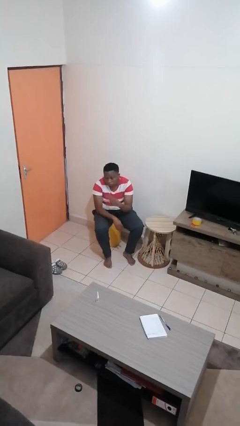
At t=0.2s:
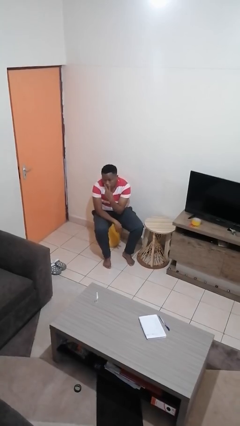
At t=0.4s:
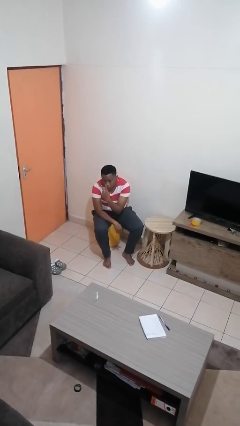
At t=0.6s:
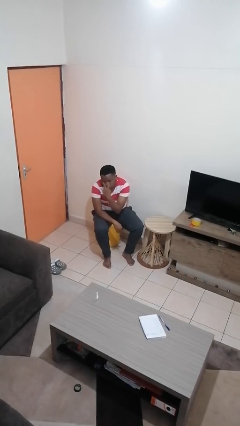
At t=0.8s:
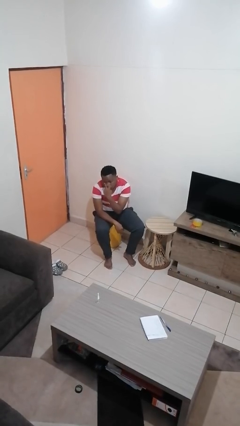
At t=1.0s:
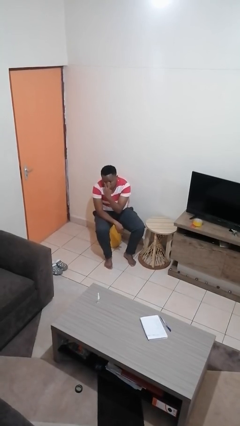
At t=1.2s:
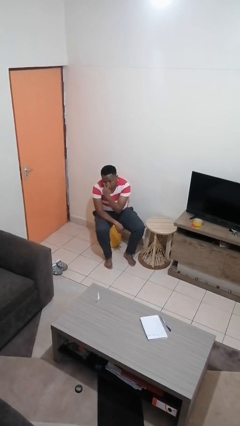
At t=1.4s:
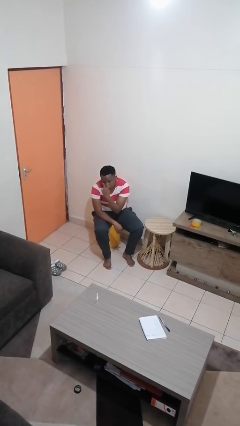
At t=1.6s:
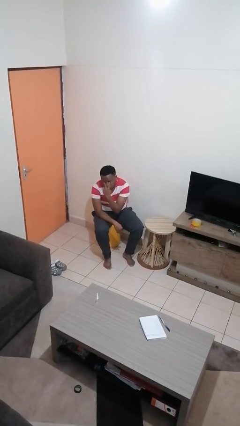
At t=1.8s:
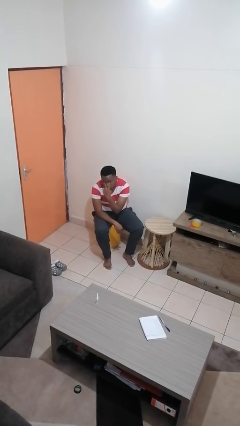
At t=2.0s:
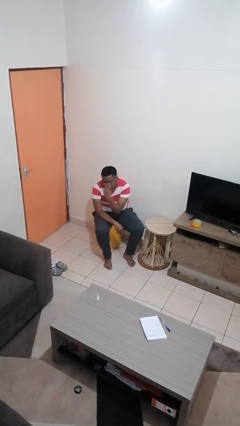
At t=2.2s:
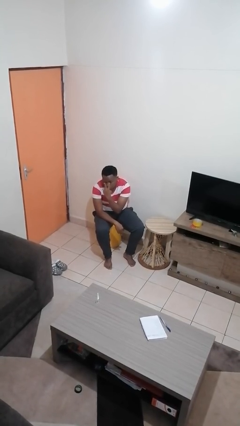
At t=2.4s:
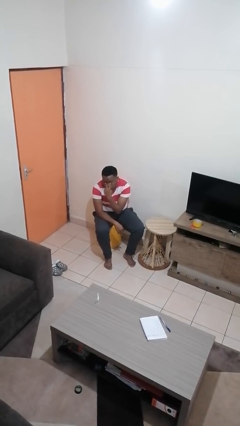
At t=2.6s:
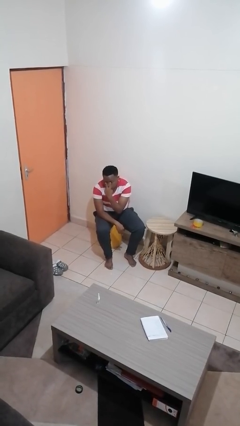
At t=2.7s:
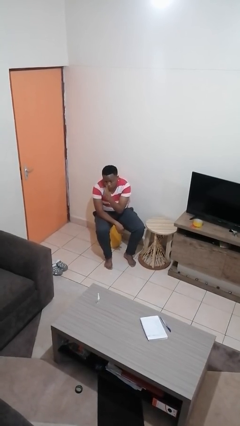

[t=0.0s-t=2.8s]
person gestures watch closely

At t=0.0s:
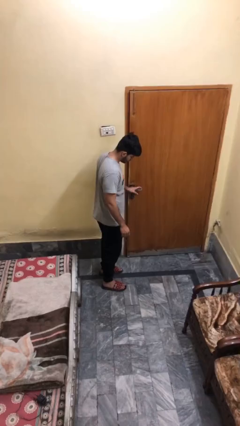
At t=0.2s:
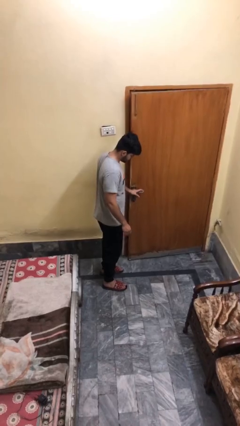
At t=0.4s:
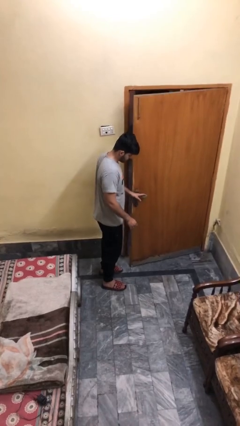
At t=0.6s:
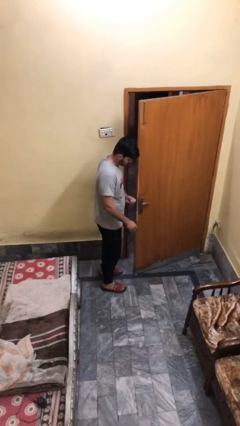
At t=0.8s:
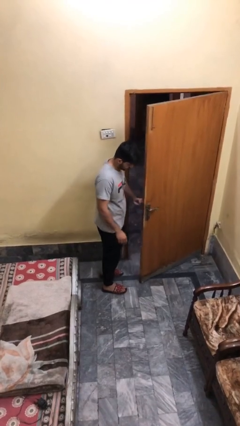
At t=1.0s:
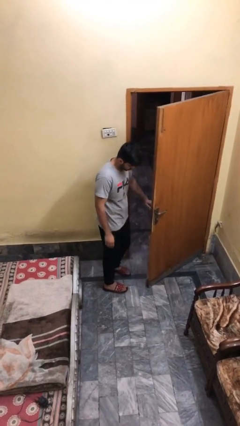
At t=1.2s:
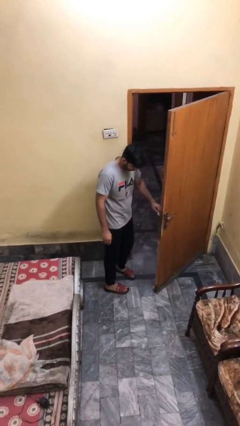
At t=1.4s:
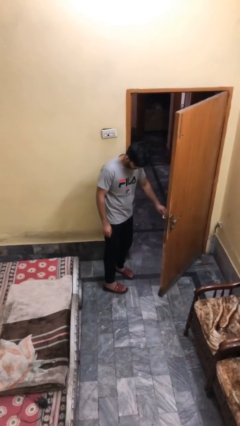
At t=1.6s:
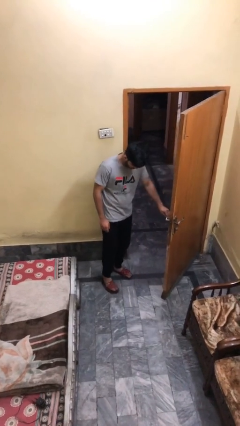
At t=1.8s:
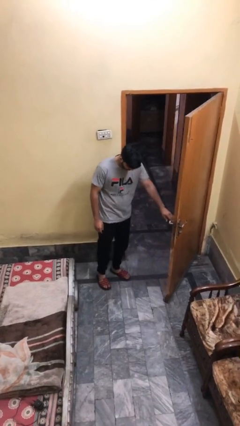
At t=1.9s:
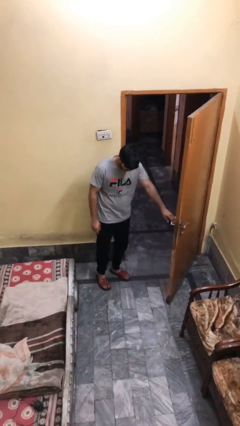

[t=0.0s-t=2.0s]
person opens facility door

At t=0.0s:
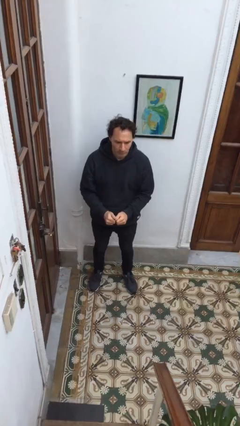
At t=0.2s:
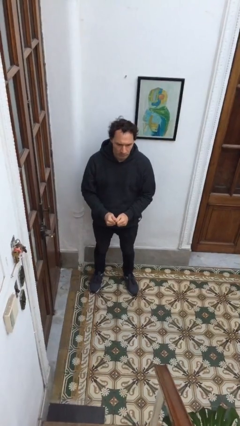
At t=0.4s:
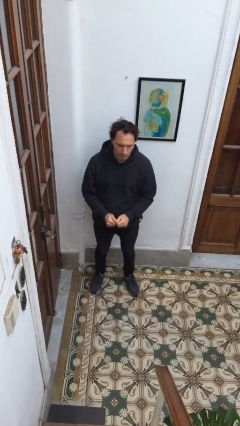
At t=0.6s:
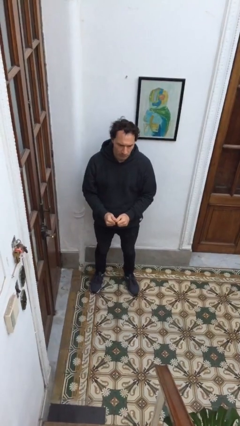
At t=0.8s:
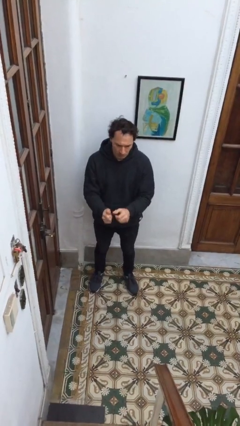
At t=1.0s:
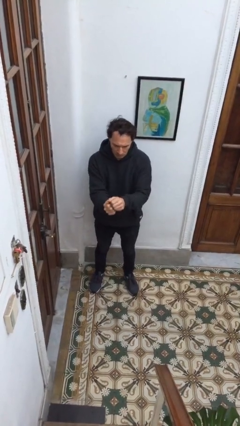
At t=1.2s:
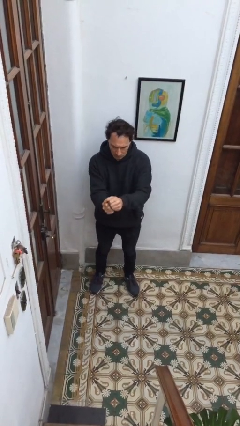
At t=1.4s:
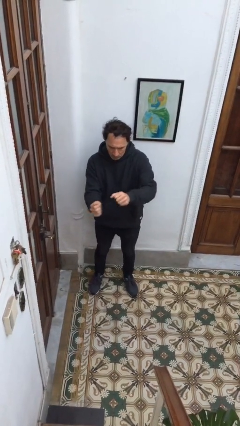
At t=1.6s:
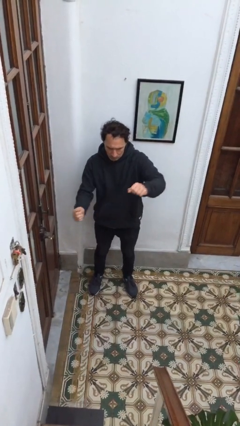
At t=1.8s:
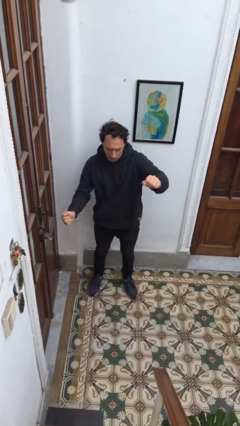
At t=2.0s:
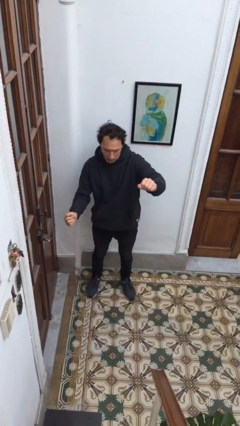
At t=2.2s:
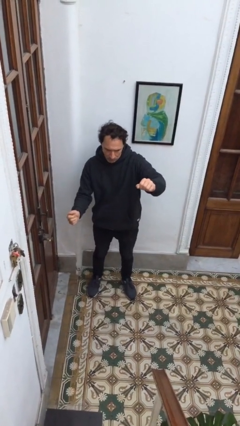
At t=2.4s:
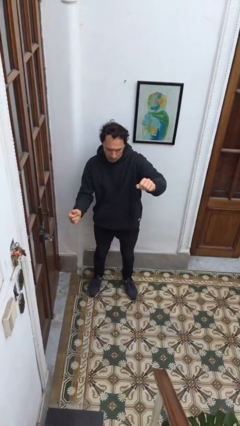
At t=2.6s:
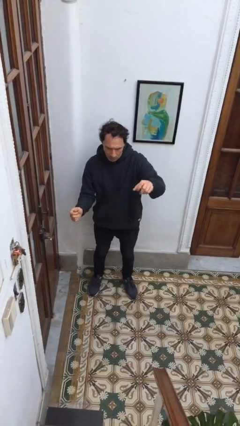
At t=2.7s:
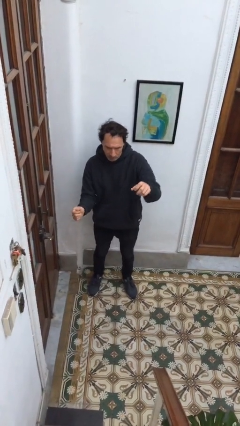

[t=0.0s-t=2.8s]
person gestures zoom in

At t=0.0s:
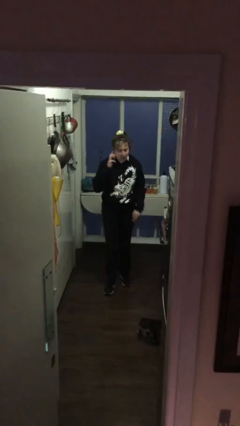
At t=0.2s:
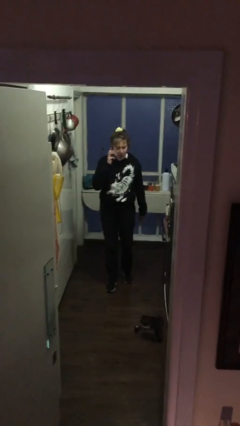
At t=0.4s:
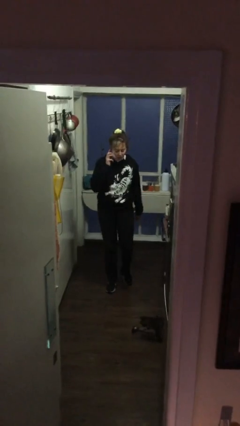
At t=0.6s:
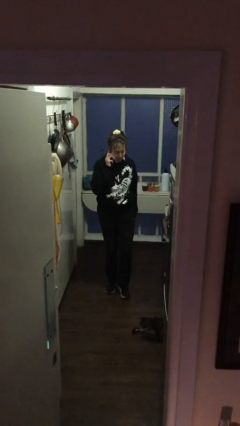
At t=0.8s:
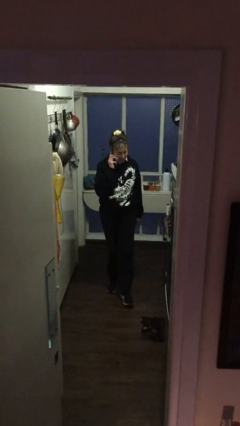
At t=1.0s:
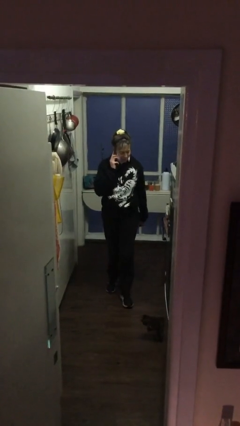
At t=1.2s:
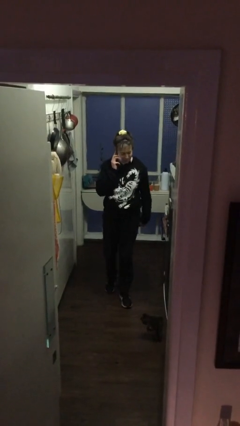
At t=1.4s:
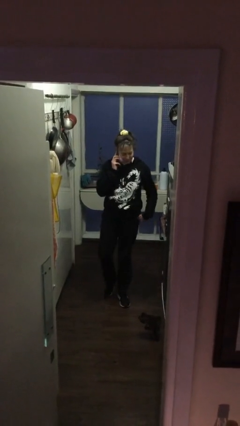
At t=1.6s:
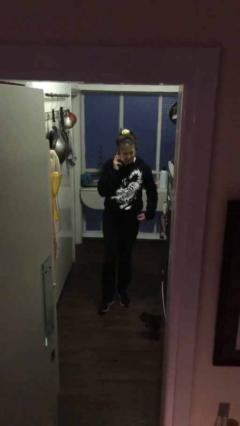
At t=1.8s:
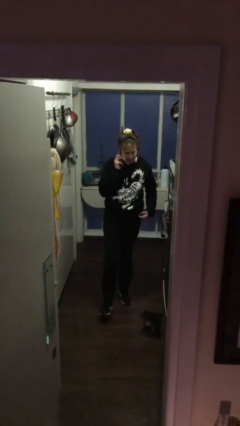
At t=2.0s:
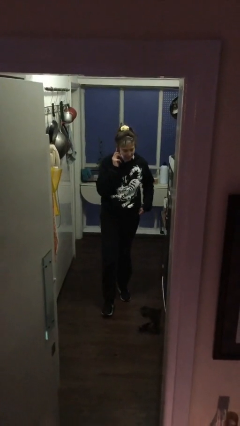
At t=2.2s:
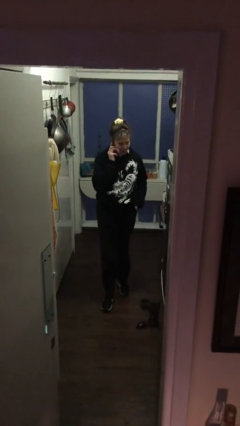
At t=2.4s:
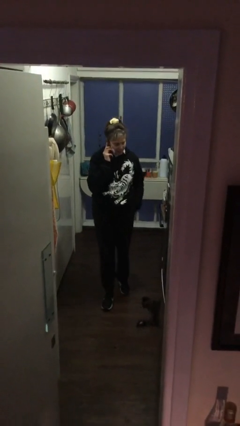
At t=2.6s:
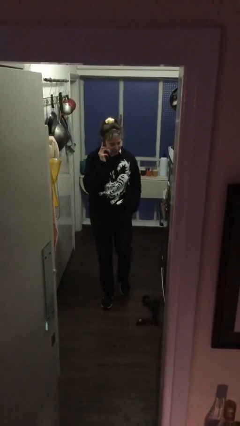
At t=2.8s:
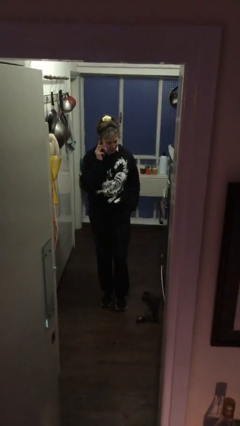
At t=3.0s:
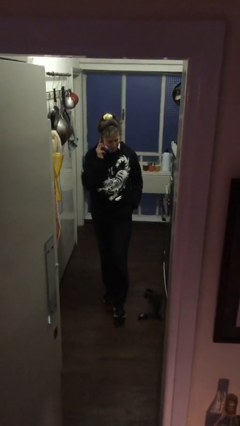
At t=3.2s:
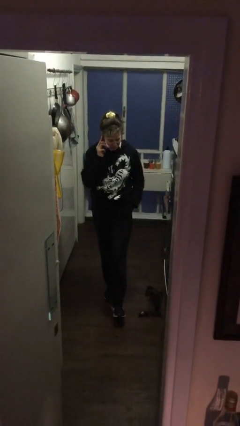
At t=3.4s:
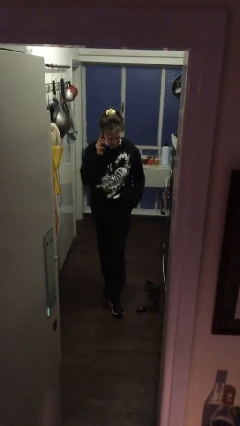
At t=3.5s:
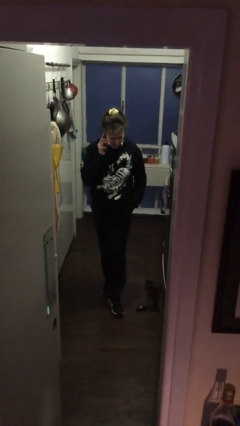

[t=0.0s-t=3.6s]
person talks on phone

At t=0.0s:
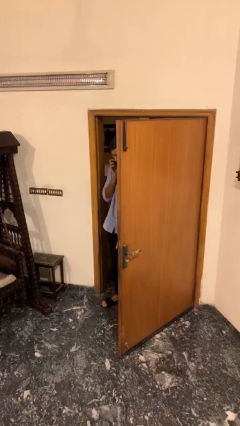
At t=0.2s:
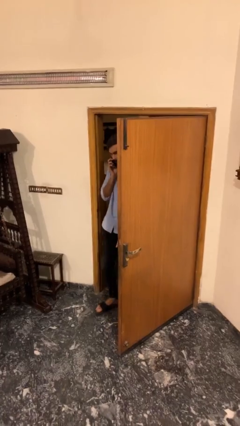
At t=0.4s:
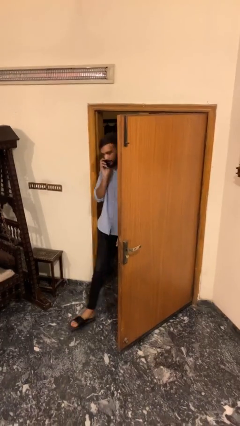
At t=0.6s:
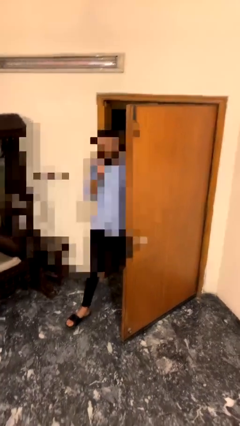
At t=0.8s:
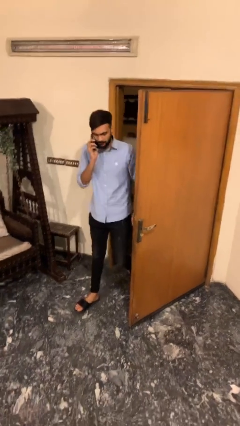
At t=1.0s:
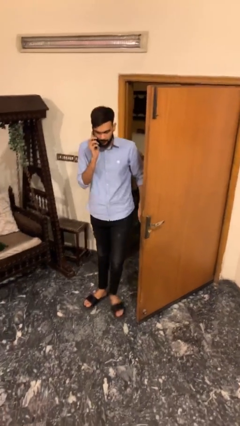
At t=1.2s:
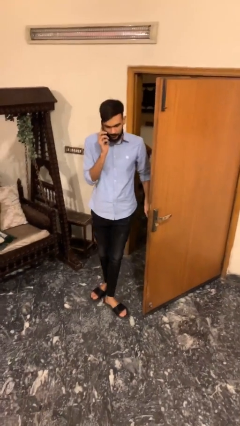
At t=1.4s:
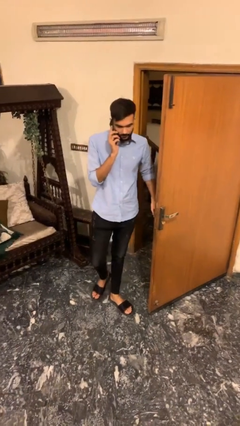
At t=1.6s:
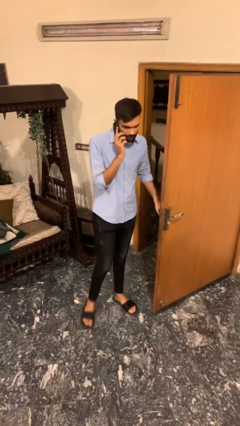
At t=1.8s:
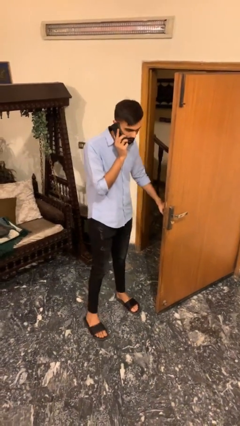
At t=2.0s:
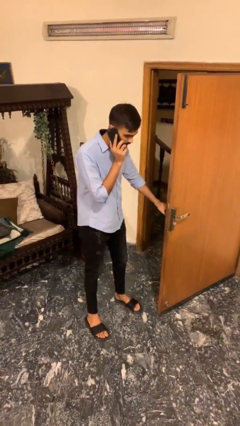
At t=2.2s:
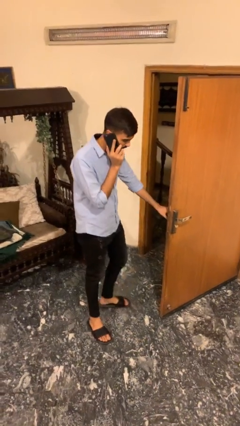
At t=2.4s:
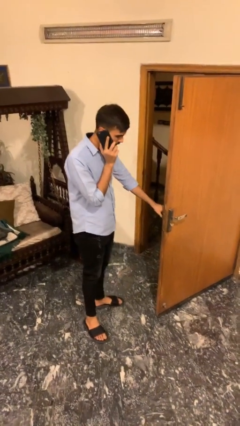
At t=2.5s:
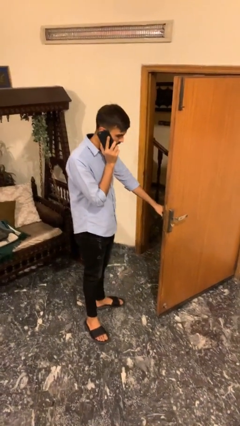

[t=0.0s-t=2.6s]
person enters scene through structure

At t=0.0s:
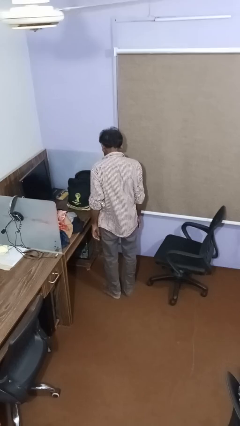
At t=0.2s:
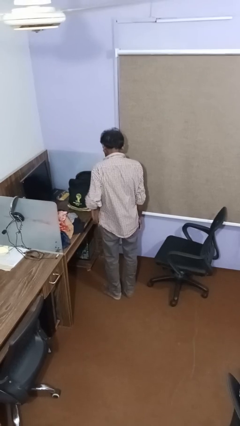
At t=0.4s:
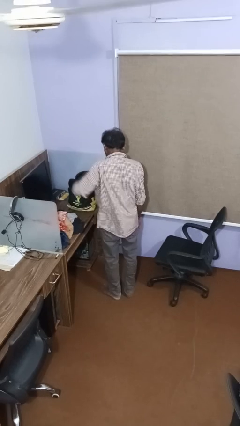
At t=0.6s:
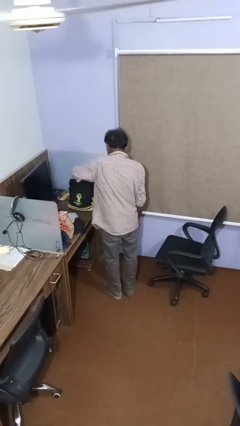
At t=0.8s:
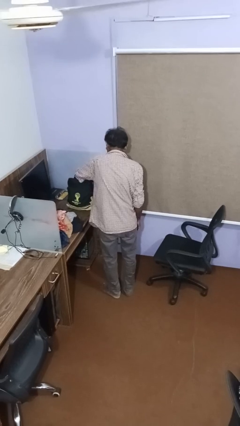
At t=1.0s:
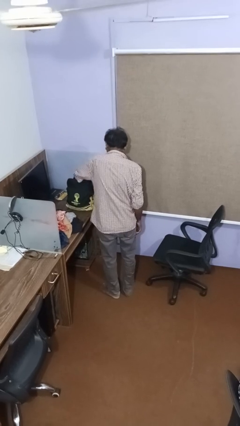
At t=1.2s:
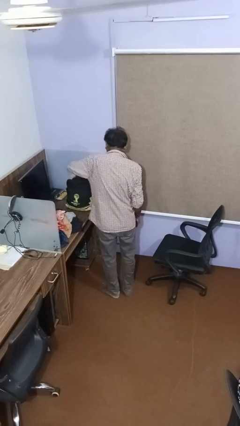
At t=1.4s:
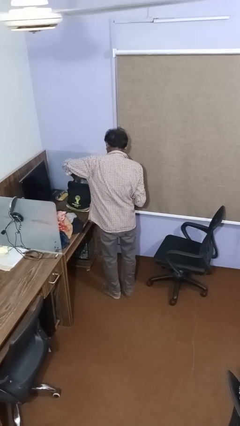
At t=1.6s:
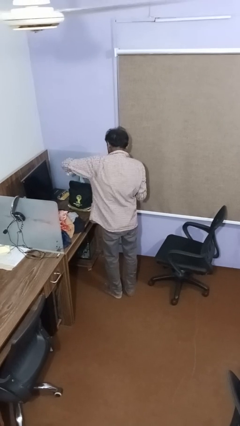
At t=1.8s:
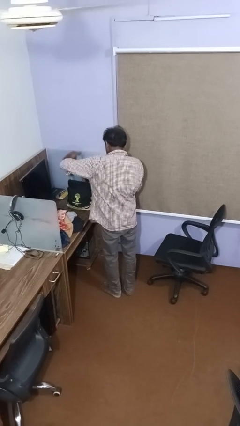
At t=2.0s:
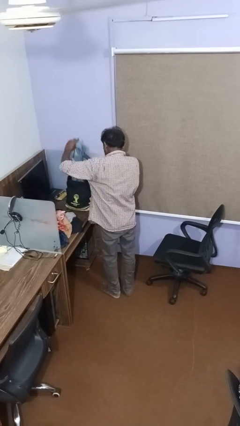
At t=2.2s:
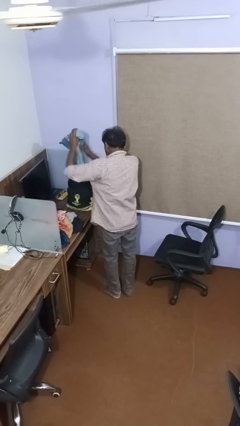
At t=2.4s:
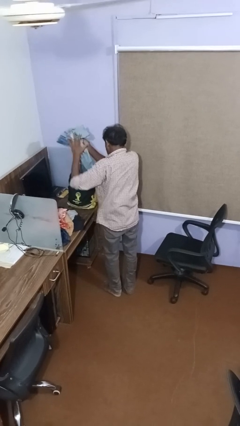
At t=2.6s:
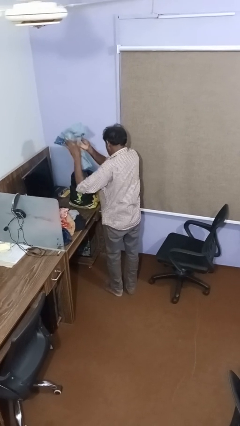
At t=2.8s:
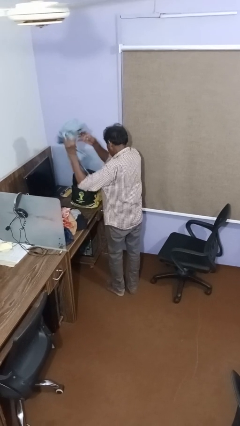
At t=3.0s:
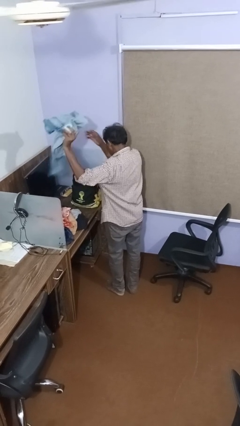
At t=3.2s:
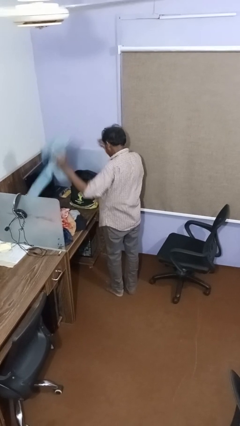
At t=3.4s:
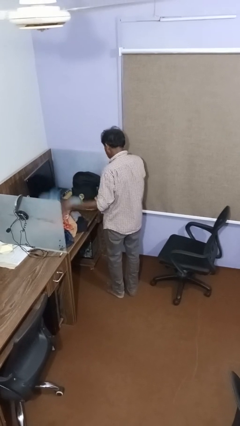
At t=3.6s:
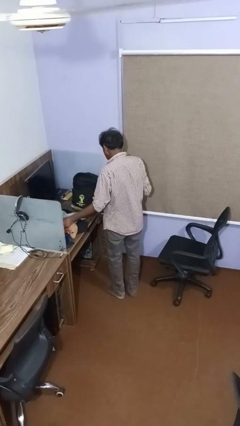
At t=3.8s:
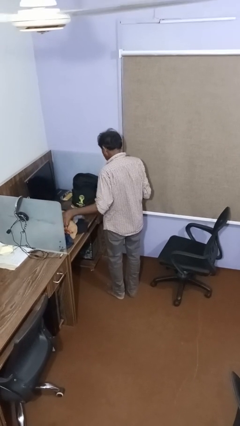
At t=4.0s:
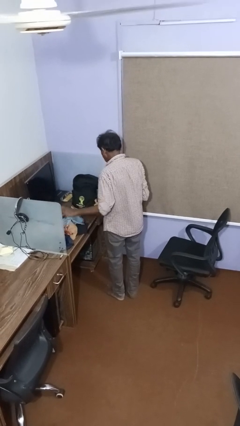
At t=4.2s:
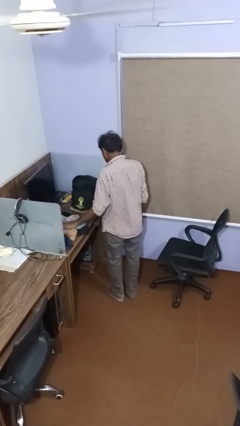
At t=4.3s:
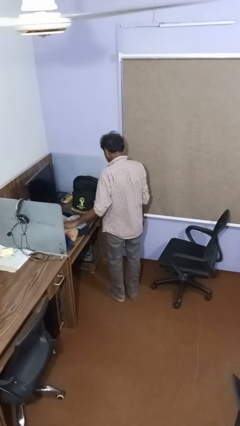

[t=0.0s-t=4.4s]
person unloads clothes from suitcase
